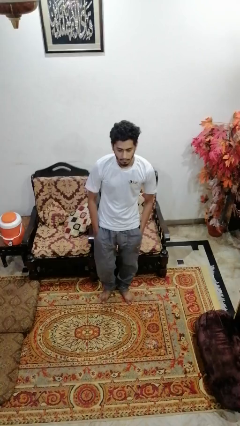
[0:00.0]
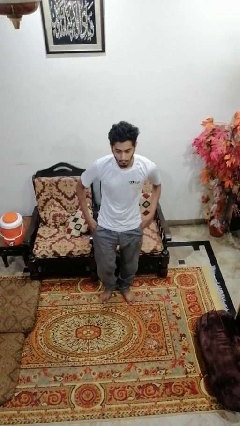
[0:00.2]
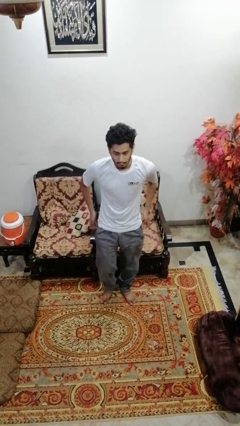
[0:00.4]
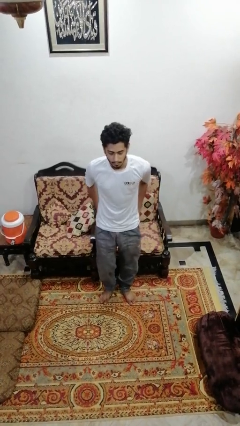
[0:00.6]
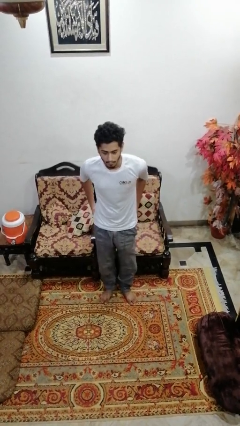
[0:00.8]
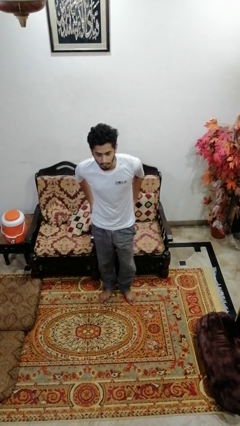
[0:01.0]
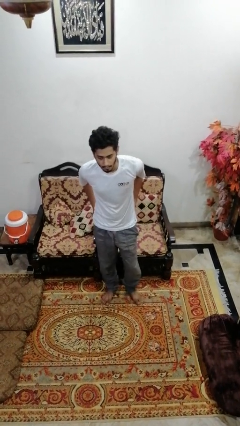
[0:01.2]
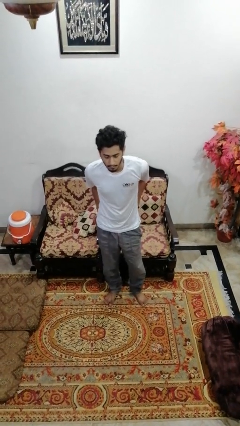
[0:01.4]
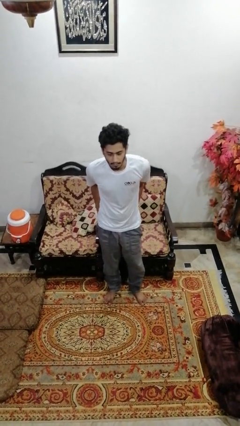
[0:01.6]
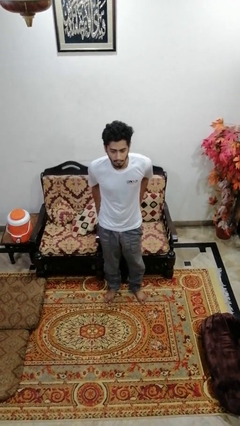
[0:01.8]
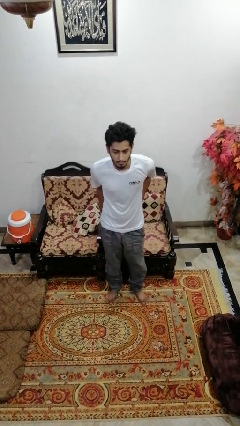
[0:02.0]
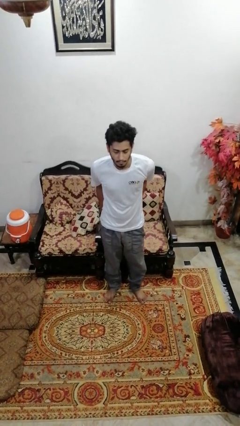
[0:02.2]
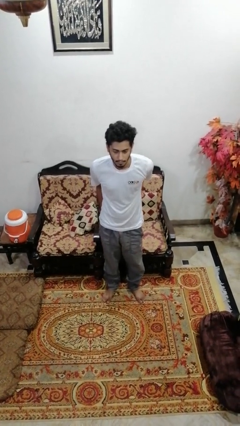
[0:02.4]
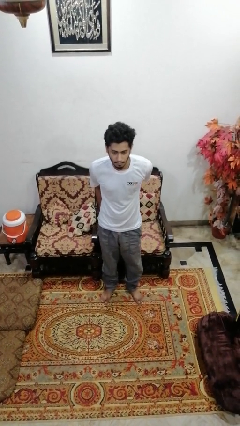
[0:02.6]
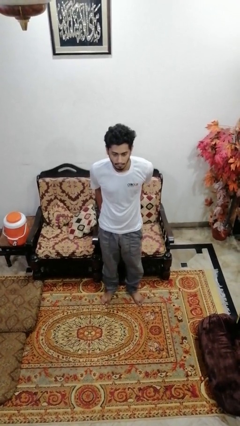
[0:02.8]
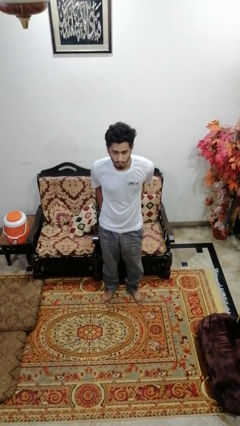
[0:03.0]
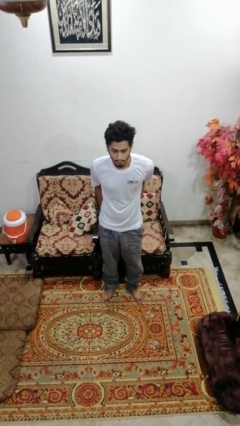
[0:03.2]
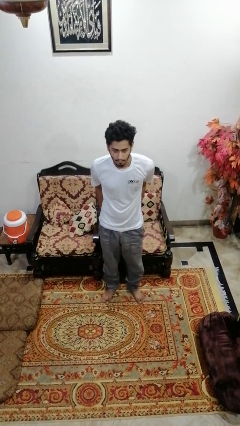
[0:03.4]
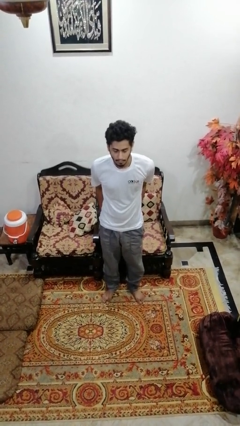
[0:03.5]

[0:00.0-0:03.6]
person puts hands in back pockets

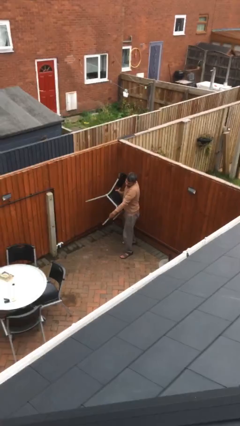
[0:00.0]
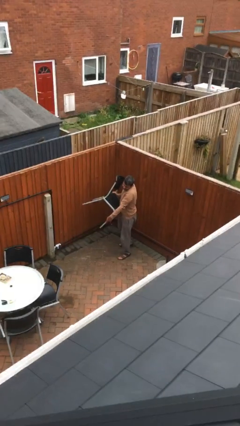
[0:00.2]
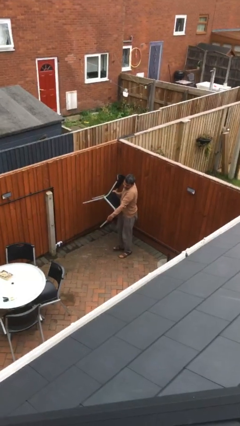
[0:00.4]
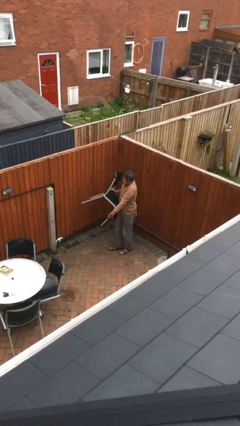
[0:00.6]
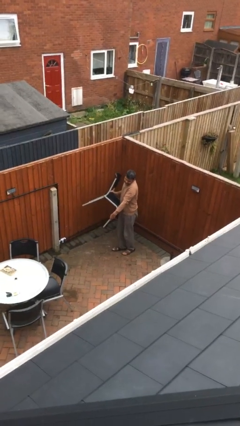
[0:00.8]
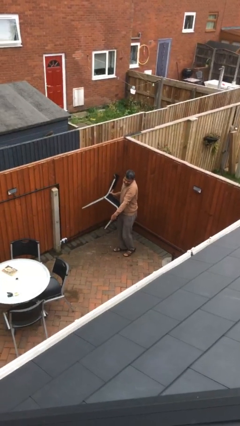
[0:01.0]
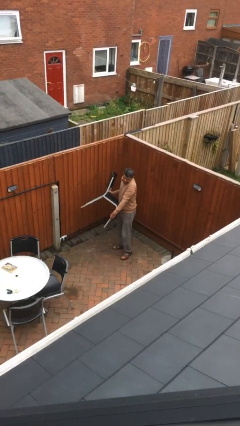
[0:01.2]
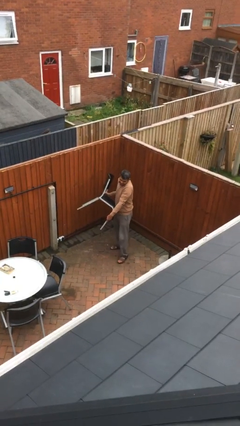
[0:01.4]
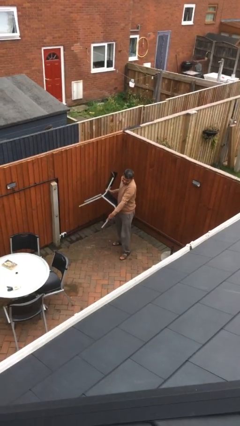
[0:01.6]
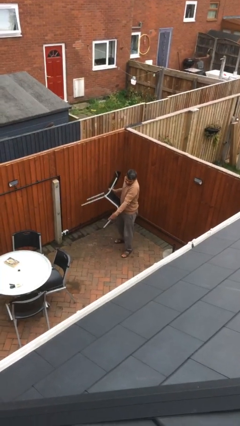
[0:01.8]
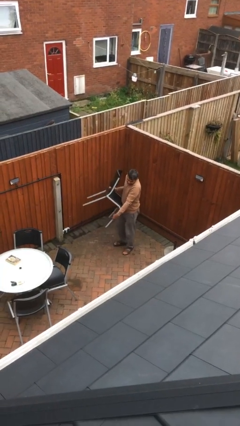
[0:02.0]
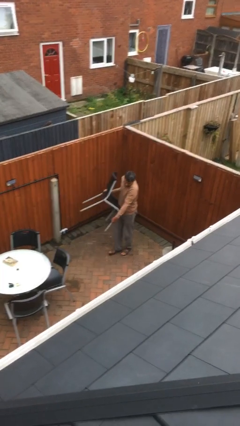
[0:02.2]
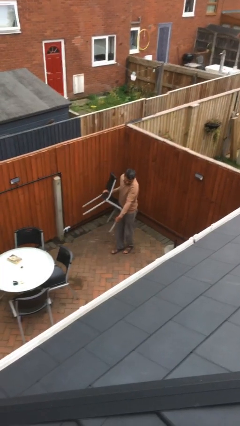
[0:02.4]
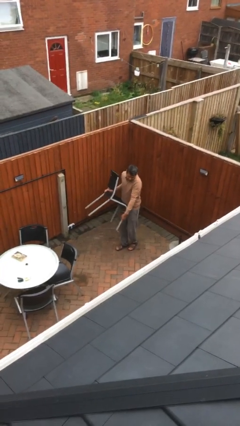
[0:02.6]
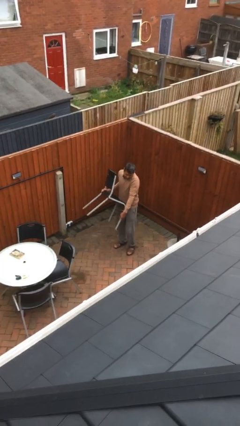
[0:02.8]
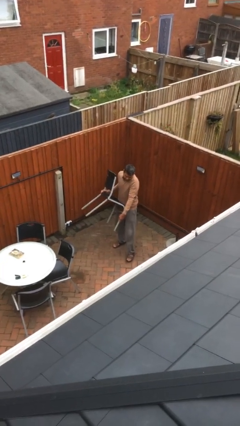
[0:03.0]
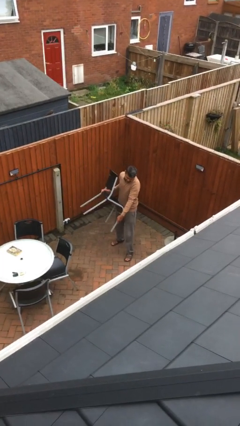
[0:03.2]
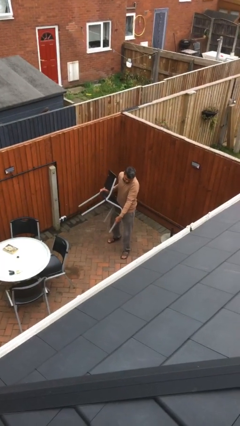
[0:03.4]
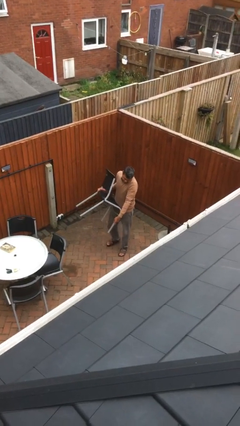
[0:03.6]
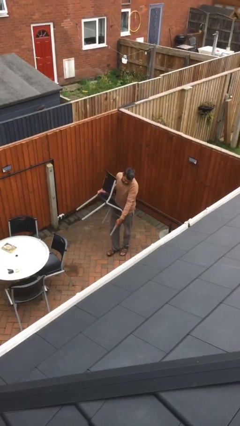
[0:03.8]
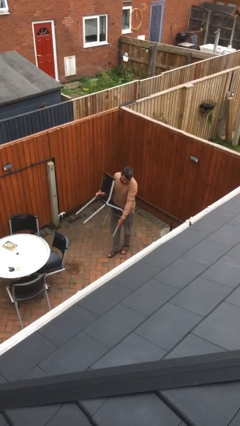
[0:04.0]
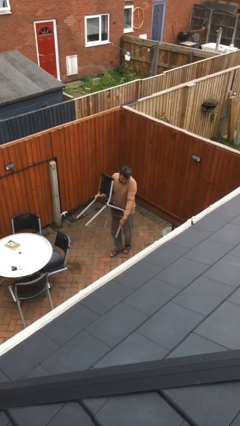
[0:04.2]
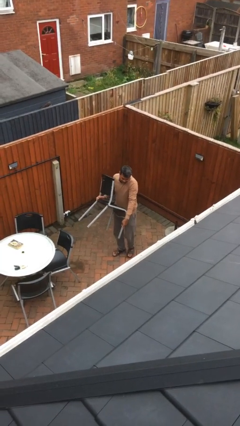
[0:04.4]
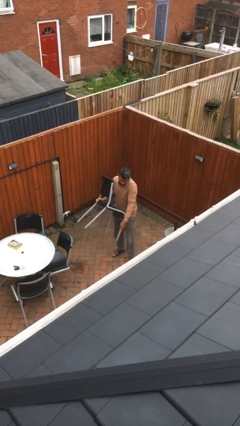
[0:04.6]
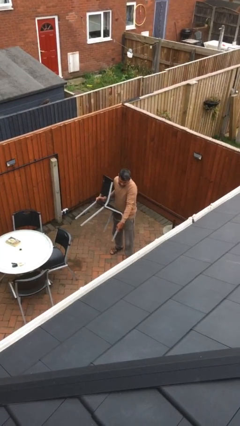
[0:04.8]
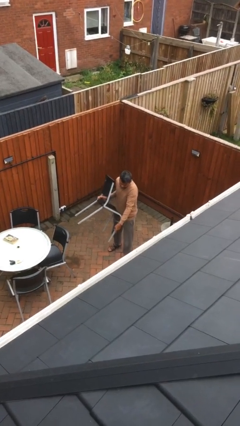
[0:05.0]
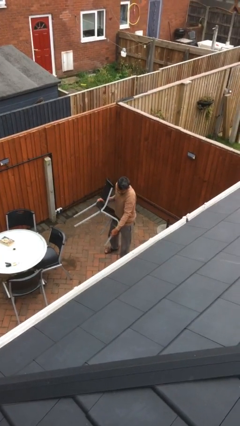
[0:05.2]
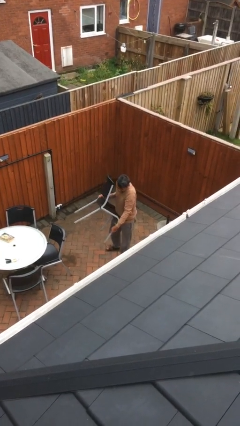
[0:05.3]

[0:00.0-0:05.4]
person carries heavy object

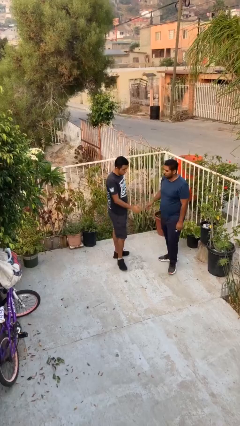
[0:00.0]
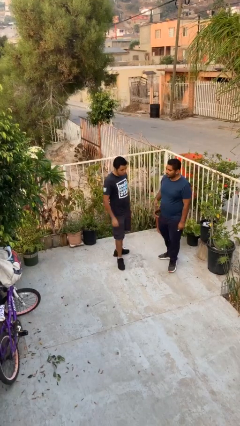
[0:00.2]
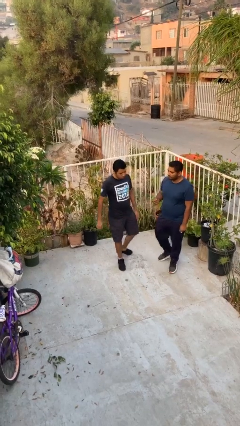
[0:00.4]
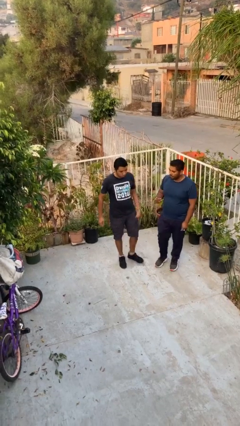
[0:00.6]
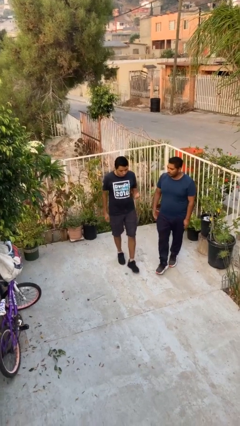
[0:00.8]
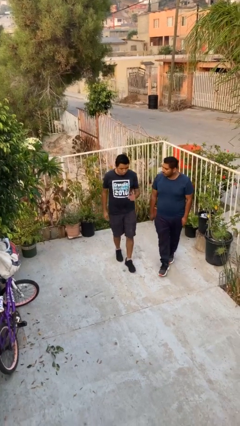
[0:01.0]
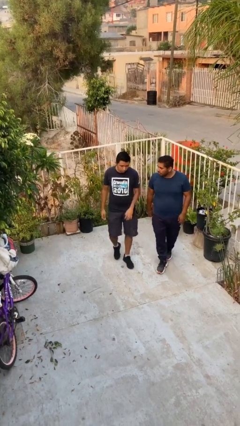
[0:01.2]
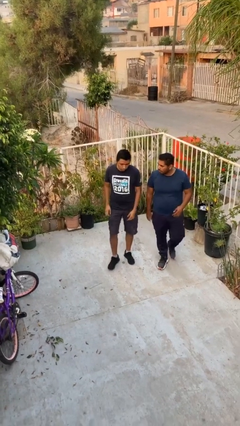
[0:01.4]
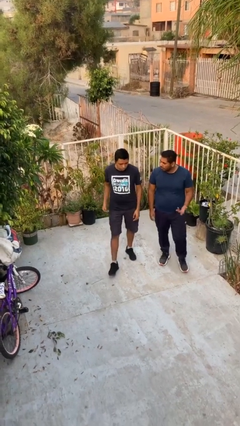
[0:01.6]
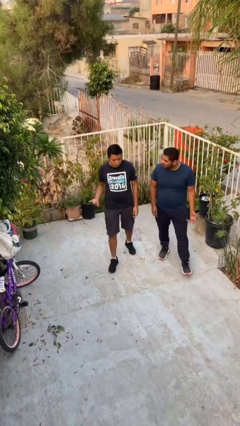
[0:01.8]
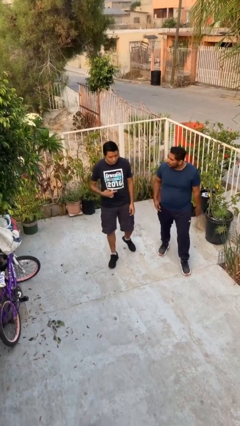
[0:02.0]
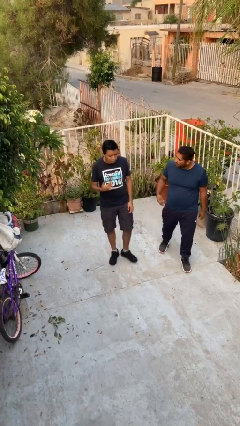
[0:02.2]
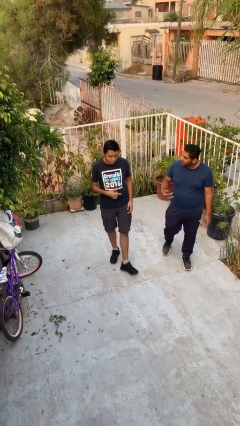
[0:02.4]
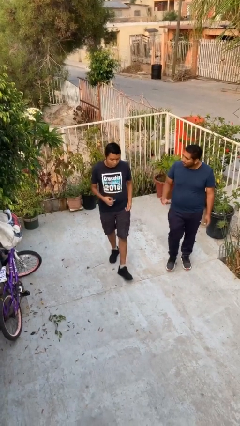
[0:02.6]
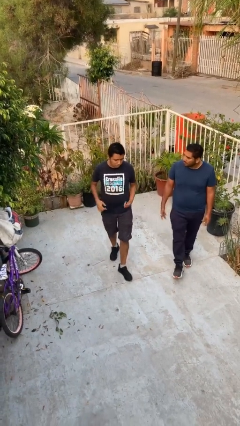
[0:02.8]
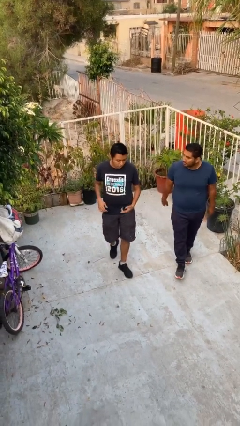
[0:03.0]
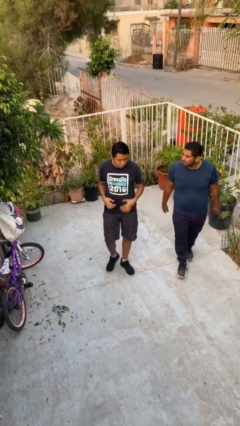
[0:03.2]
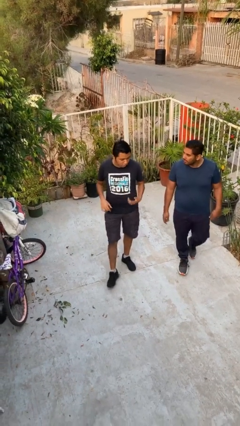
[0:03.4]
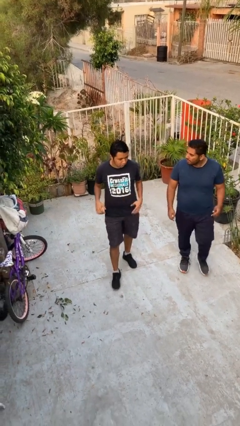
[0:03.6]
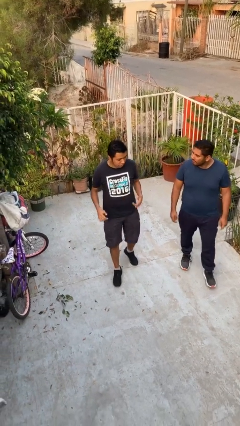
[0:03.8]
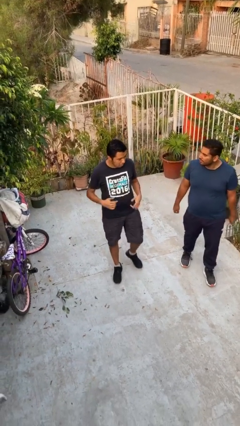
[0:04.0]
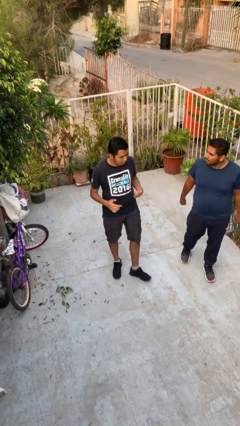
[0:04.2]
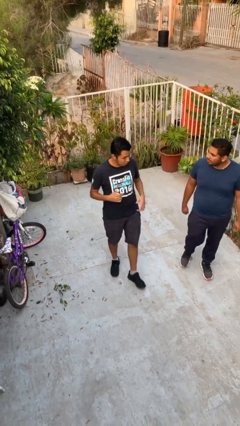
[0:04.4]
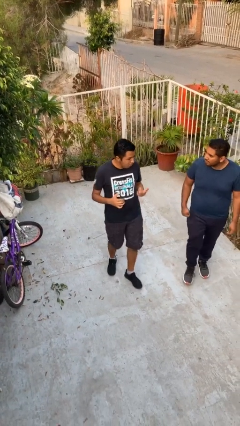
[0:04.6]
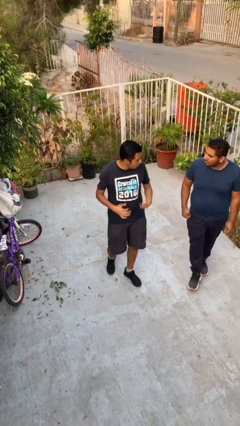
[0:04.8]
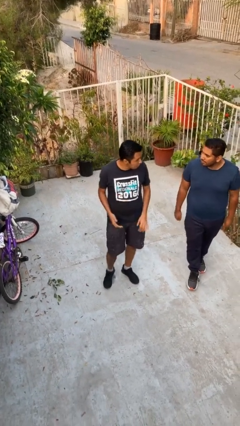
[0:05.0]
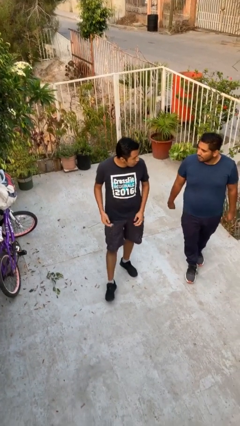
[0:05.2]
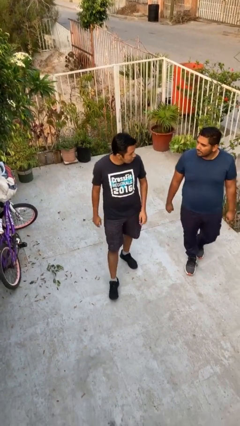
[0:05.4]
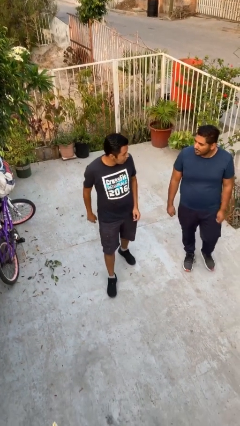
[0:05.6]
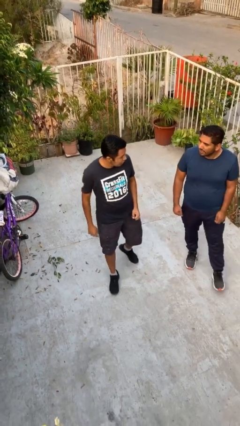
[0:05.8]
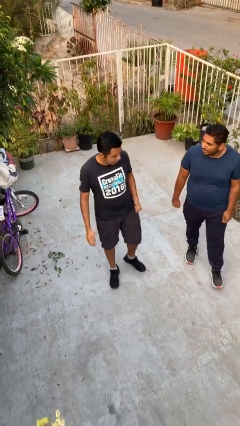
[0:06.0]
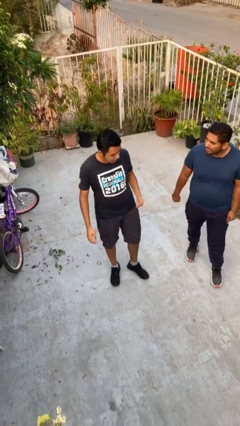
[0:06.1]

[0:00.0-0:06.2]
person talks to person

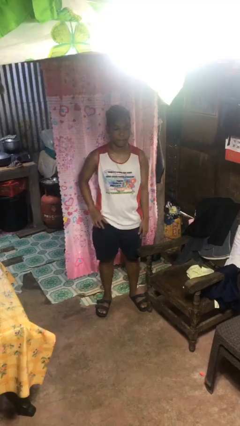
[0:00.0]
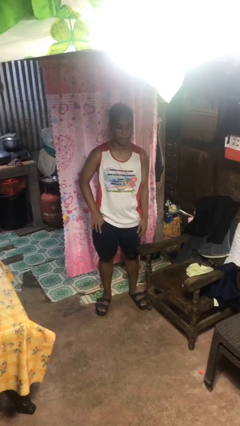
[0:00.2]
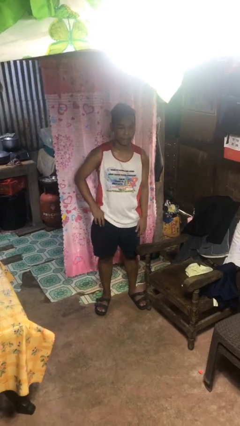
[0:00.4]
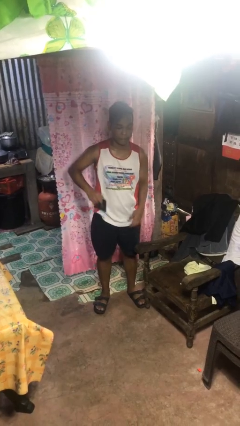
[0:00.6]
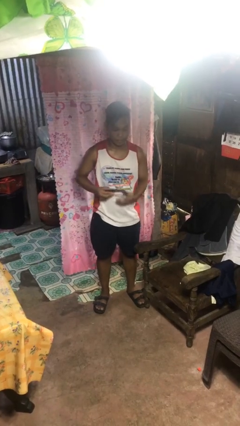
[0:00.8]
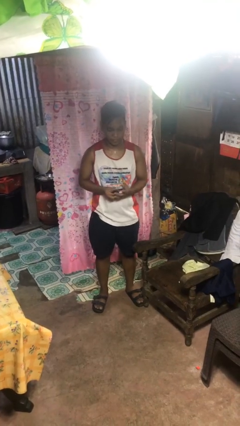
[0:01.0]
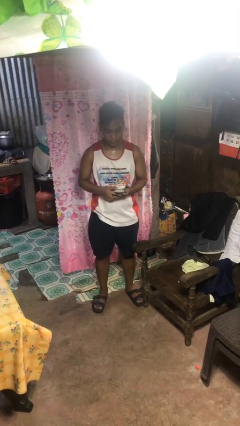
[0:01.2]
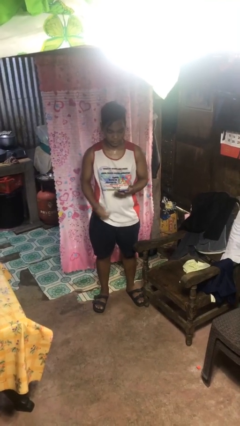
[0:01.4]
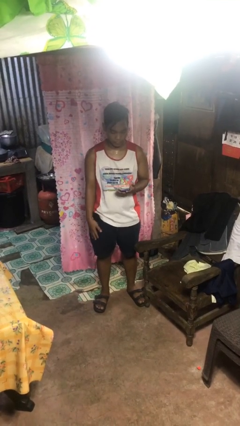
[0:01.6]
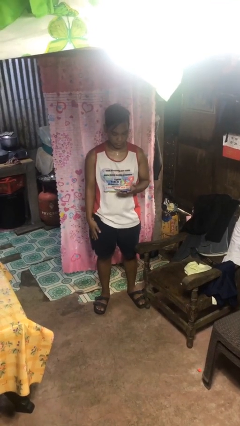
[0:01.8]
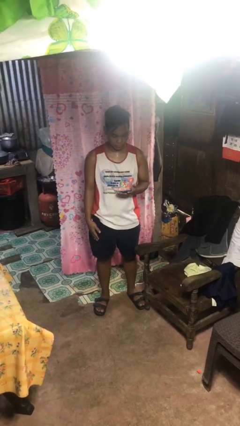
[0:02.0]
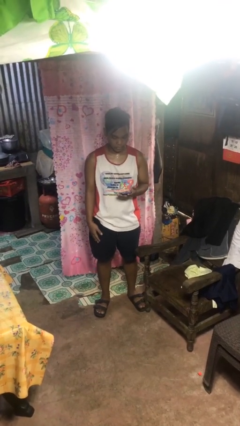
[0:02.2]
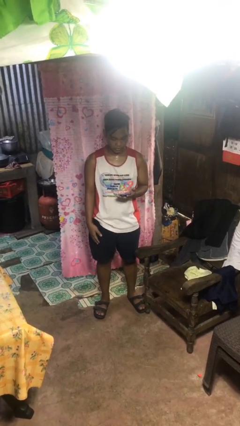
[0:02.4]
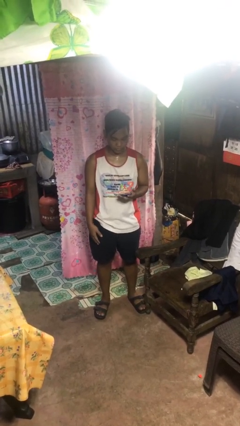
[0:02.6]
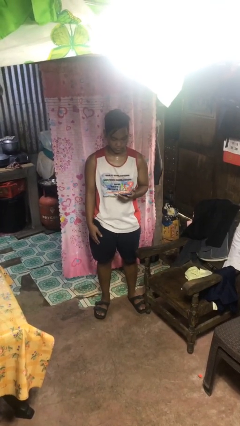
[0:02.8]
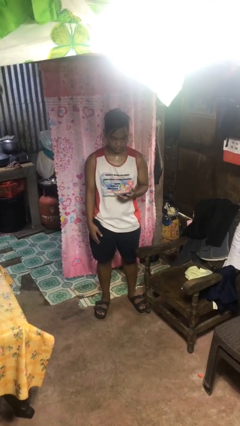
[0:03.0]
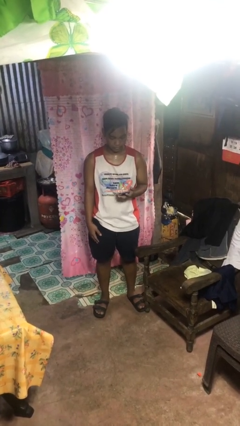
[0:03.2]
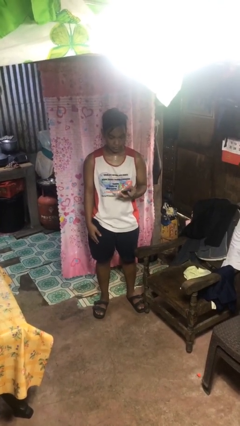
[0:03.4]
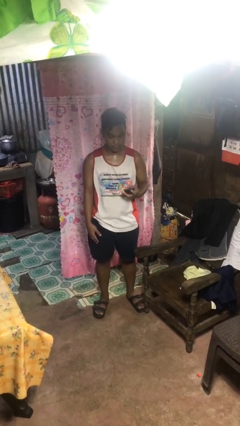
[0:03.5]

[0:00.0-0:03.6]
person takes phone from pocket
